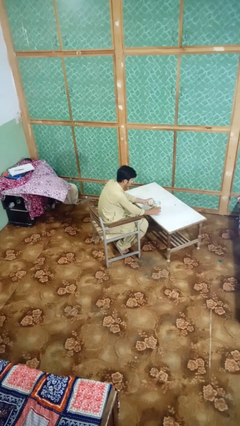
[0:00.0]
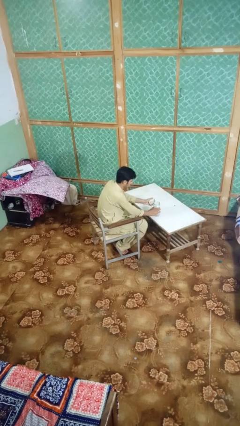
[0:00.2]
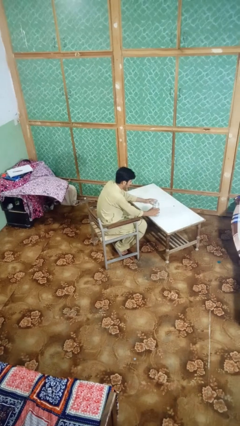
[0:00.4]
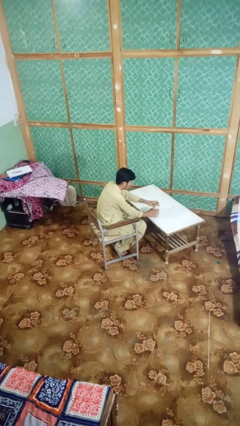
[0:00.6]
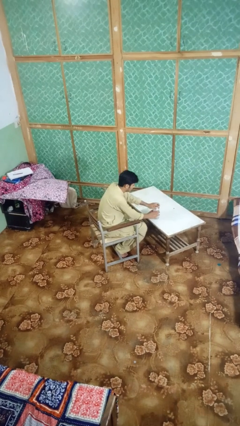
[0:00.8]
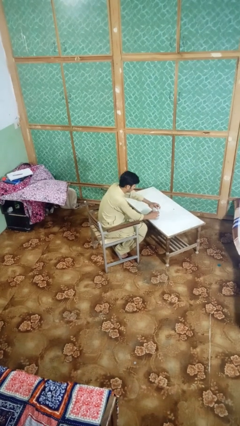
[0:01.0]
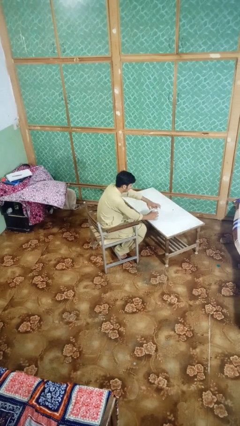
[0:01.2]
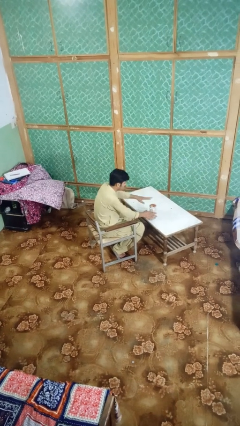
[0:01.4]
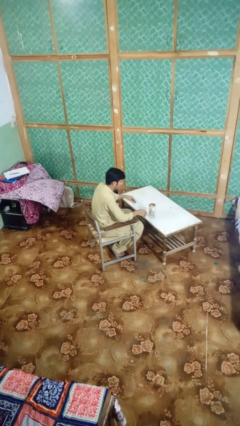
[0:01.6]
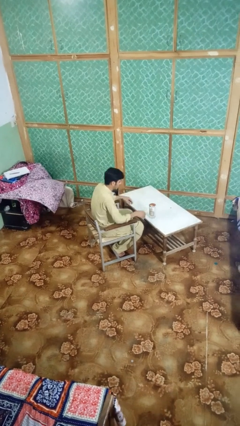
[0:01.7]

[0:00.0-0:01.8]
person closes jar

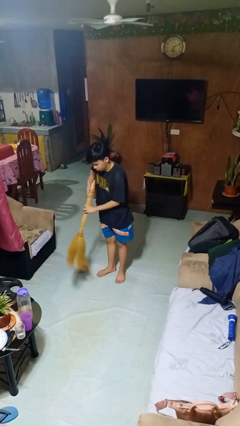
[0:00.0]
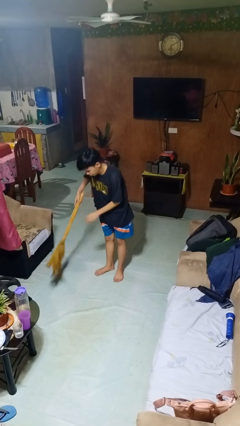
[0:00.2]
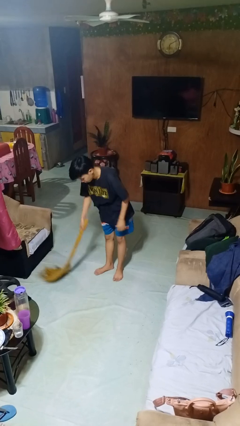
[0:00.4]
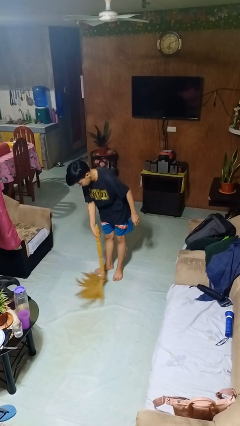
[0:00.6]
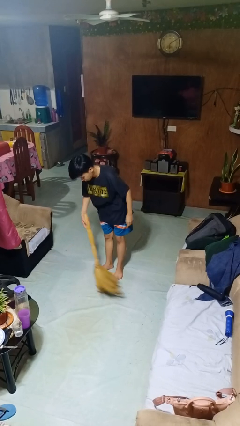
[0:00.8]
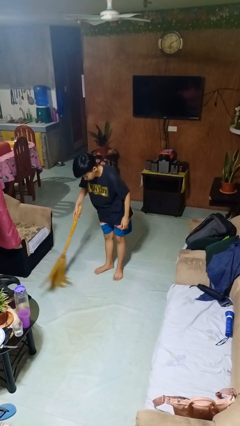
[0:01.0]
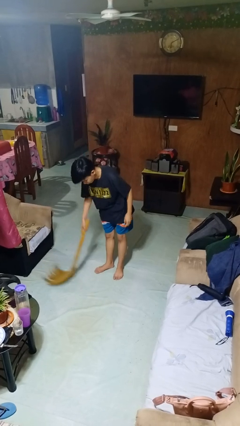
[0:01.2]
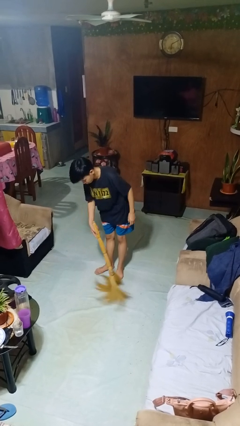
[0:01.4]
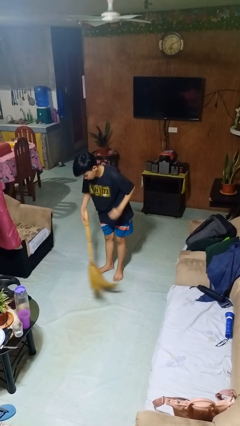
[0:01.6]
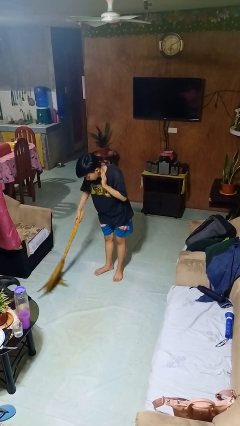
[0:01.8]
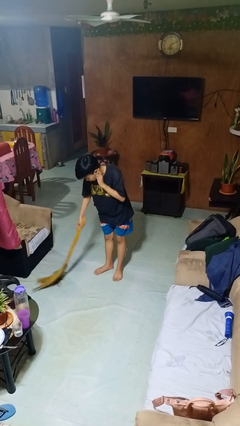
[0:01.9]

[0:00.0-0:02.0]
person sweeps floor

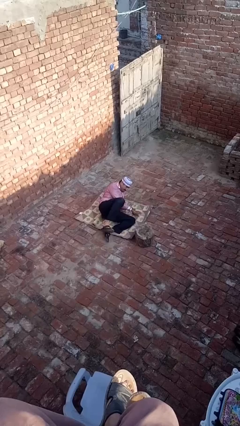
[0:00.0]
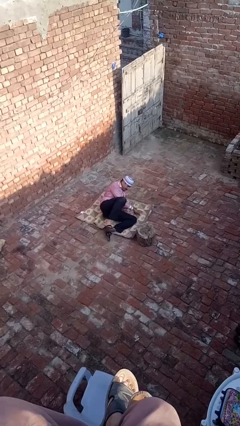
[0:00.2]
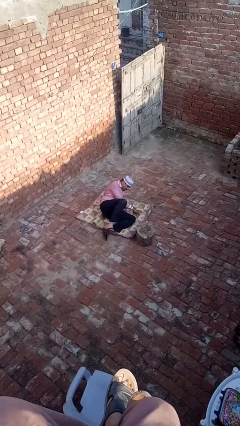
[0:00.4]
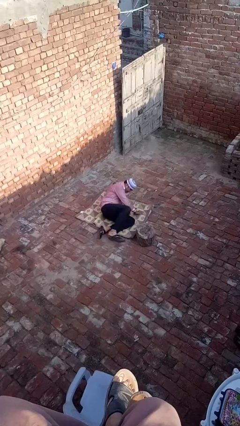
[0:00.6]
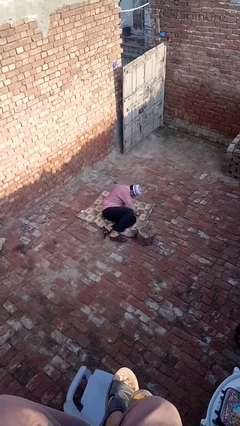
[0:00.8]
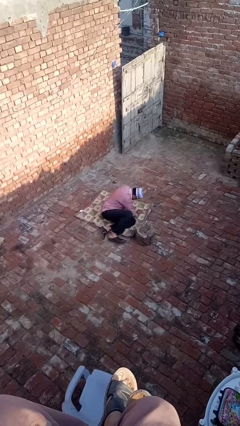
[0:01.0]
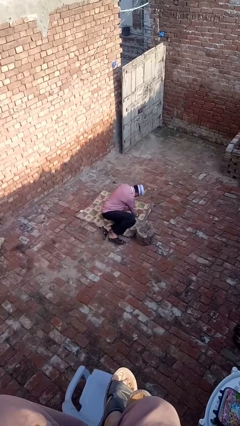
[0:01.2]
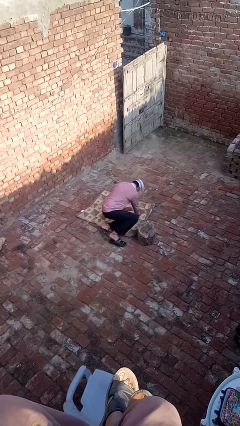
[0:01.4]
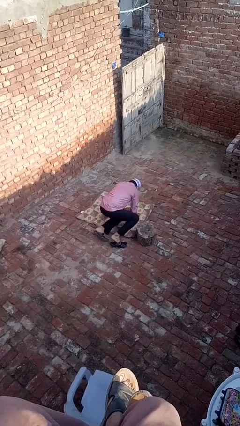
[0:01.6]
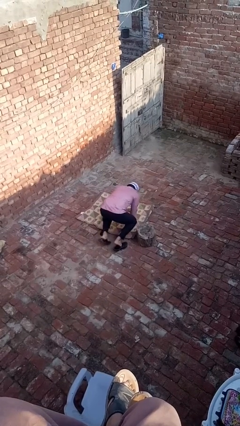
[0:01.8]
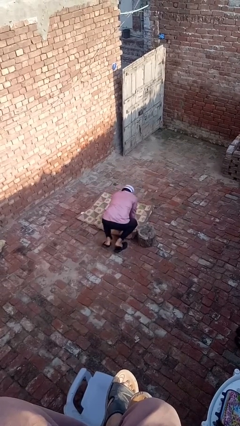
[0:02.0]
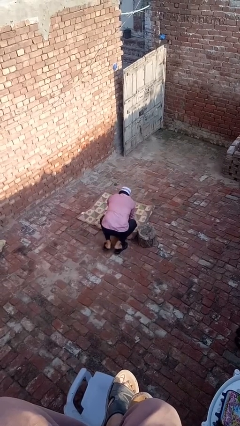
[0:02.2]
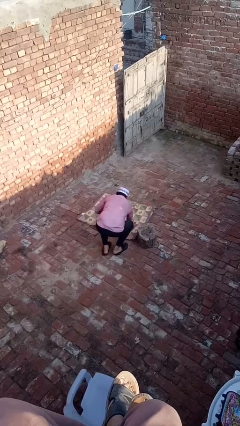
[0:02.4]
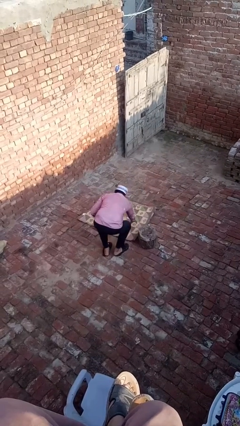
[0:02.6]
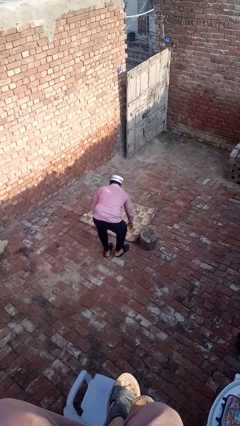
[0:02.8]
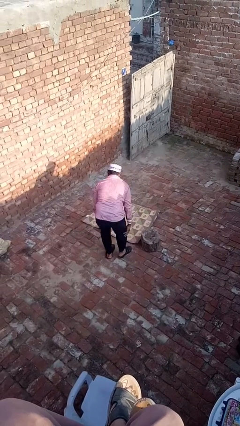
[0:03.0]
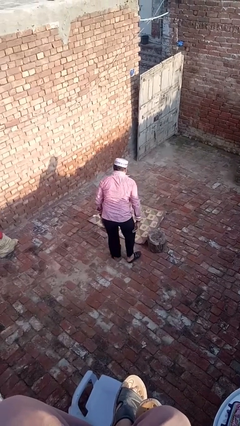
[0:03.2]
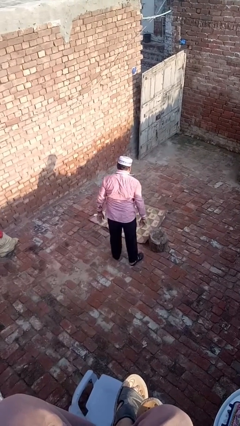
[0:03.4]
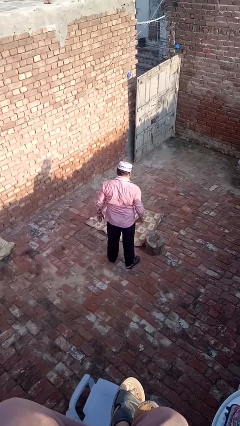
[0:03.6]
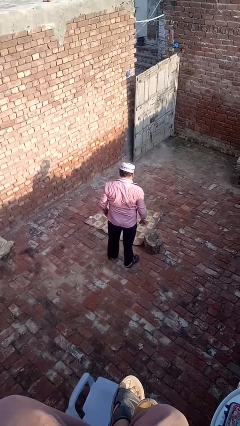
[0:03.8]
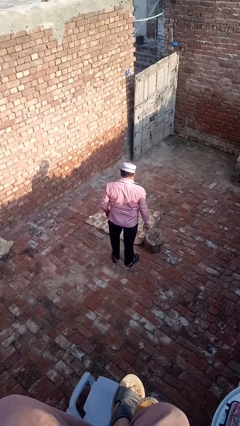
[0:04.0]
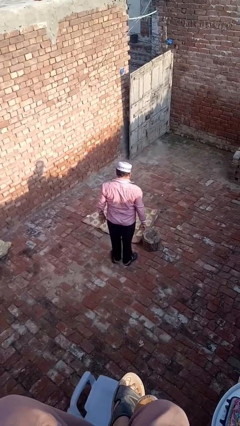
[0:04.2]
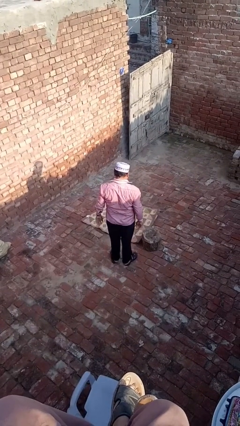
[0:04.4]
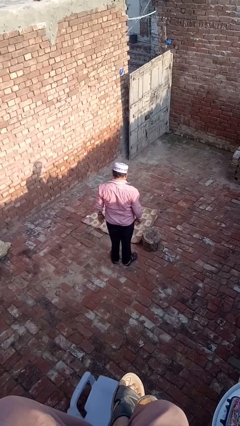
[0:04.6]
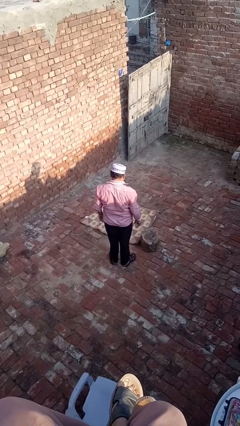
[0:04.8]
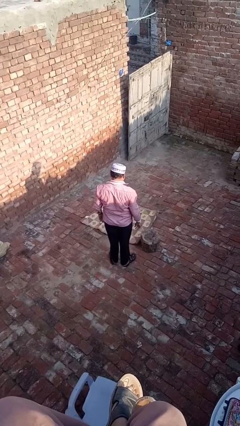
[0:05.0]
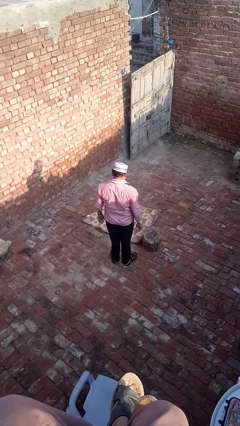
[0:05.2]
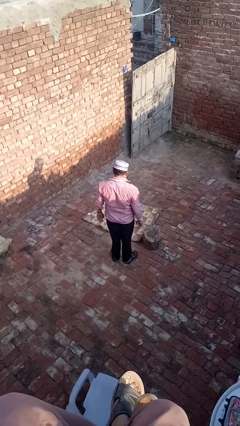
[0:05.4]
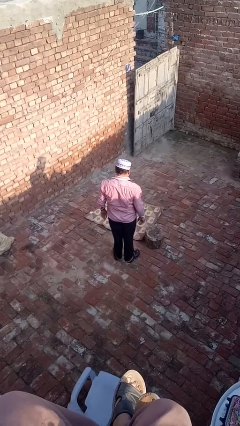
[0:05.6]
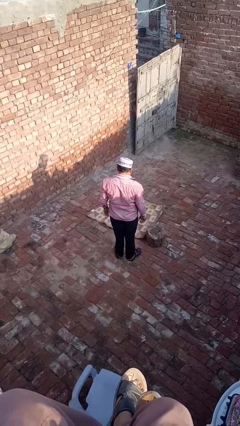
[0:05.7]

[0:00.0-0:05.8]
person stands up from floor

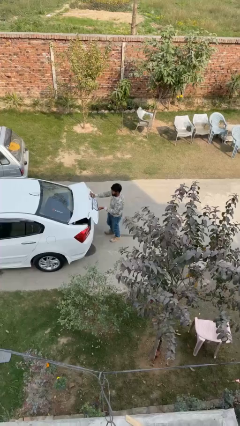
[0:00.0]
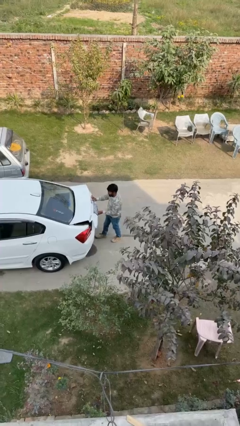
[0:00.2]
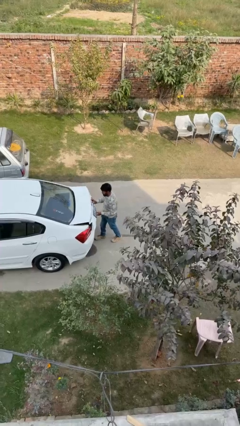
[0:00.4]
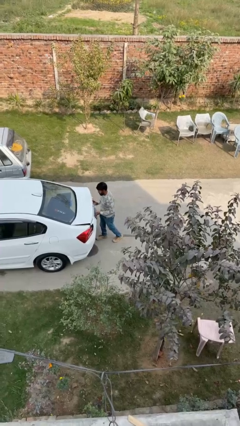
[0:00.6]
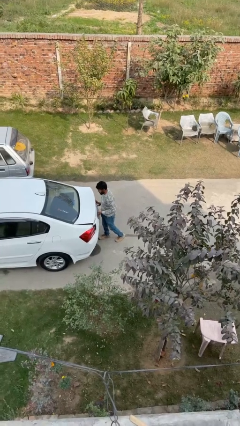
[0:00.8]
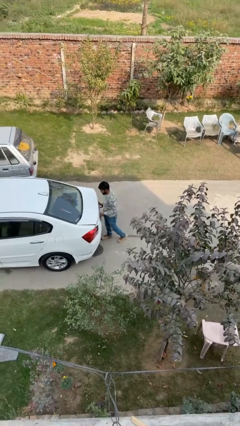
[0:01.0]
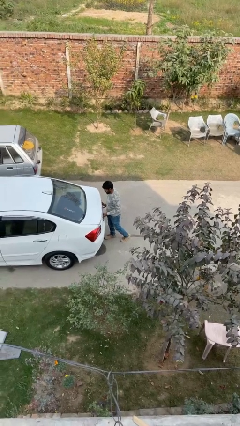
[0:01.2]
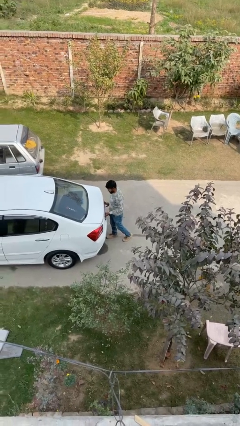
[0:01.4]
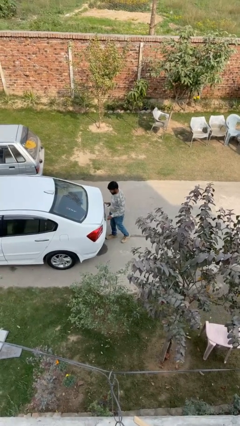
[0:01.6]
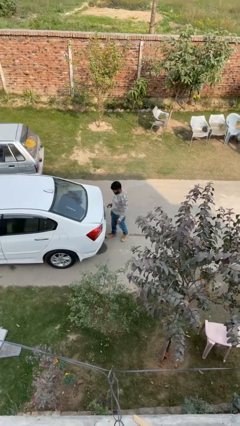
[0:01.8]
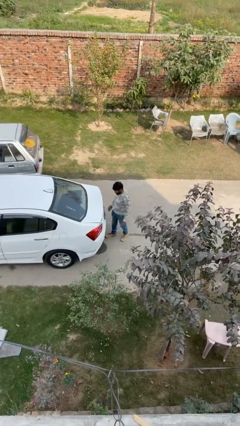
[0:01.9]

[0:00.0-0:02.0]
person closes car trunk

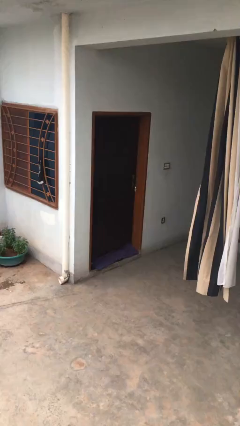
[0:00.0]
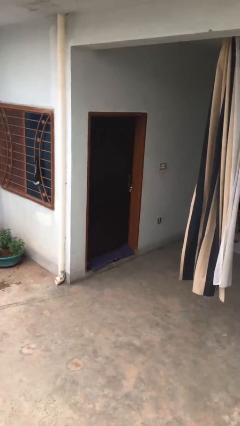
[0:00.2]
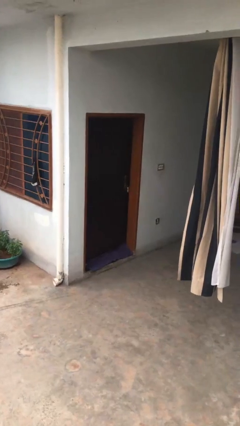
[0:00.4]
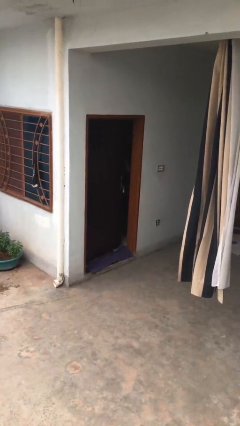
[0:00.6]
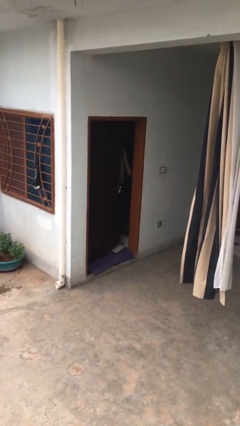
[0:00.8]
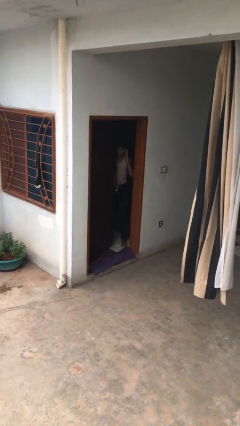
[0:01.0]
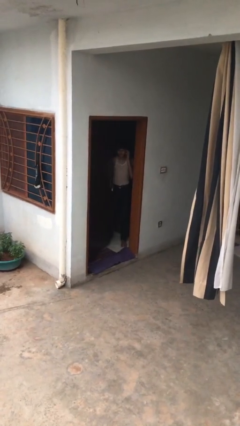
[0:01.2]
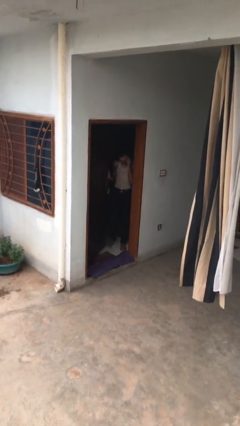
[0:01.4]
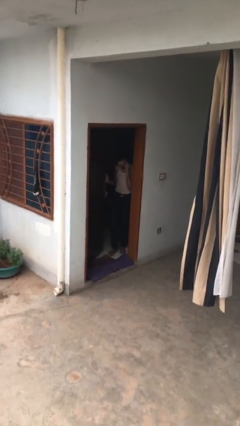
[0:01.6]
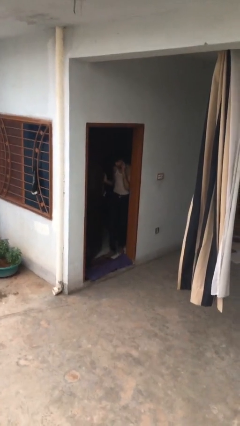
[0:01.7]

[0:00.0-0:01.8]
person opens facility door

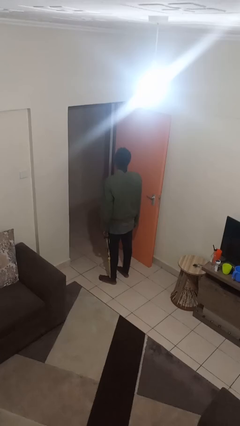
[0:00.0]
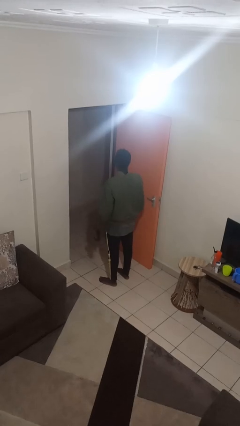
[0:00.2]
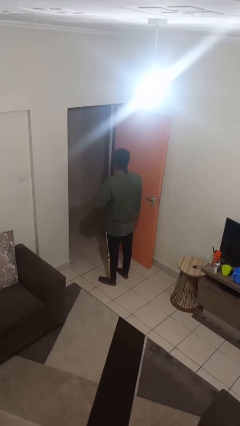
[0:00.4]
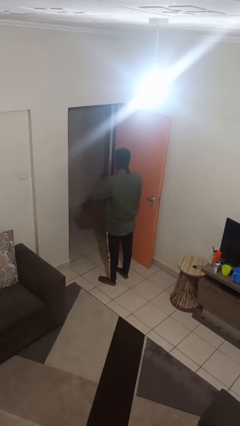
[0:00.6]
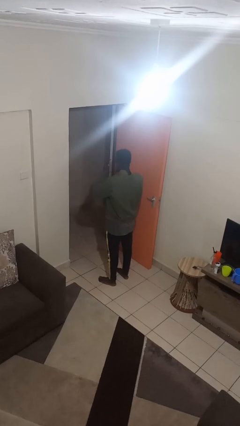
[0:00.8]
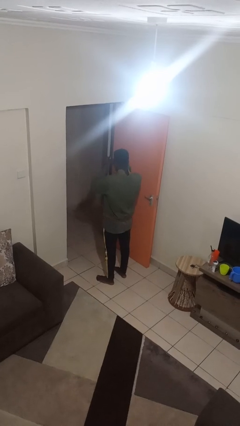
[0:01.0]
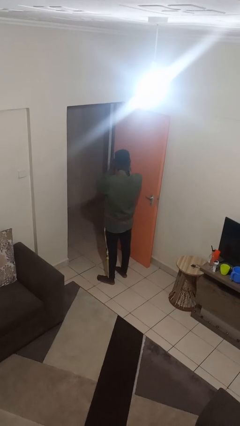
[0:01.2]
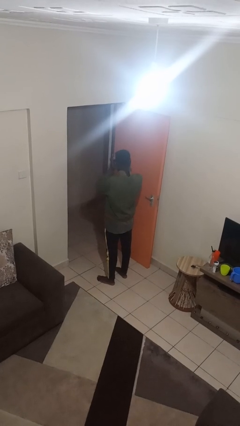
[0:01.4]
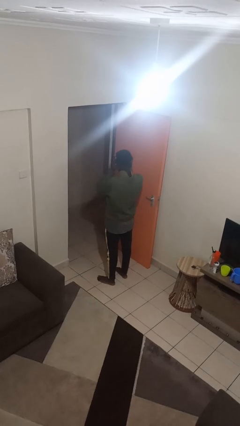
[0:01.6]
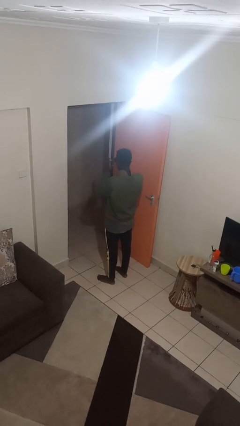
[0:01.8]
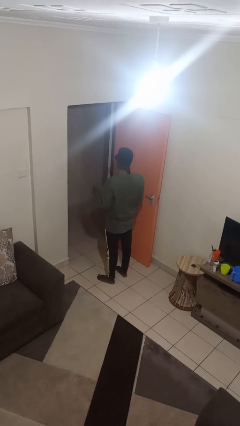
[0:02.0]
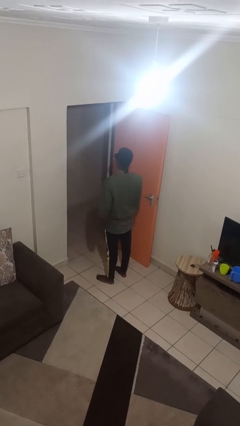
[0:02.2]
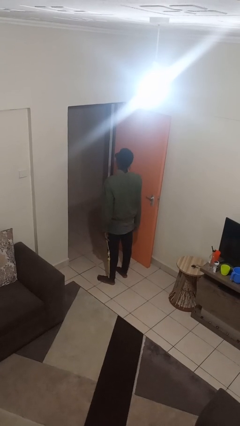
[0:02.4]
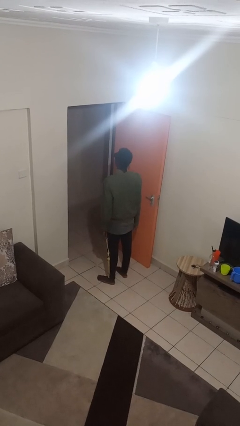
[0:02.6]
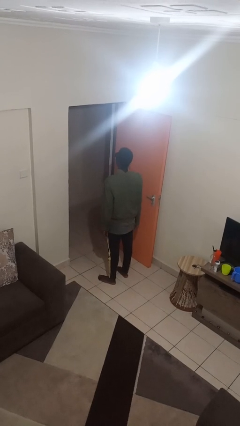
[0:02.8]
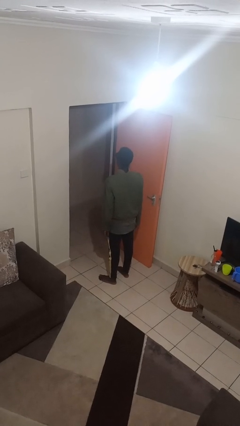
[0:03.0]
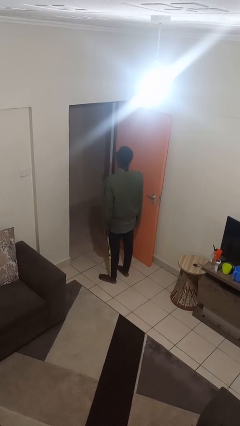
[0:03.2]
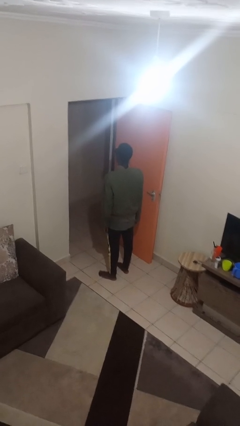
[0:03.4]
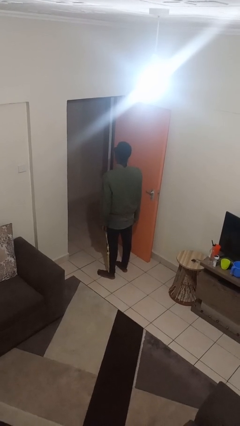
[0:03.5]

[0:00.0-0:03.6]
person puts on sunglasses

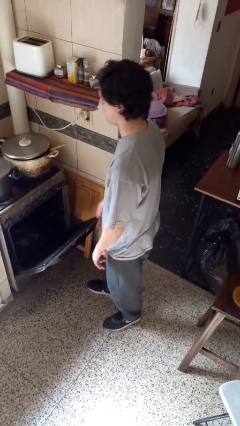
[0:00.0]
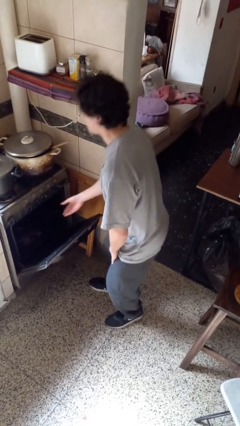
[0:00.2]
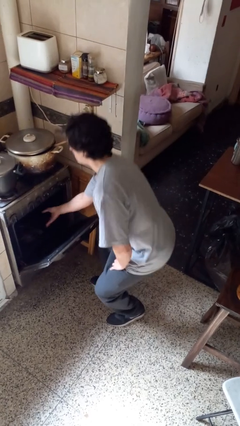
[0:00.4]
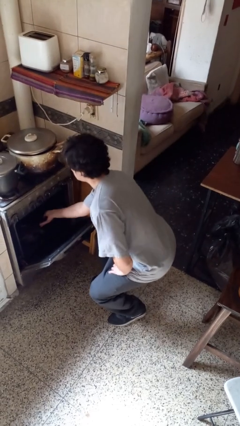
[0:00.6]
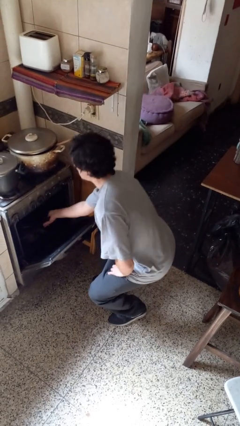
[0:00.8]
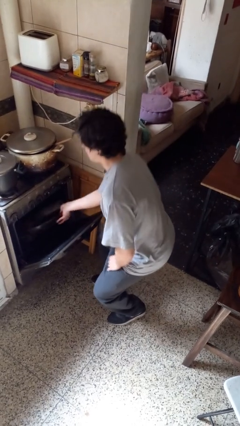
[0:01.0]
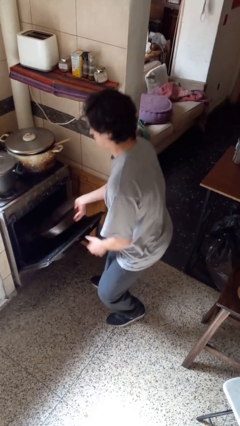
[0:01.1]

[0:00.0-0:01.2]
person takes object from oven
